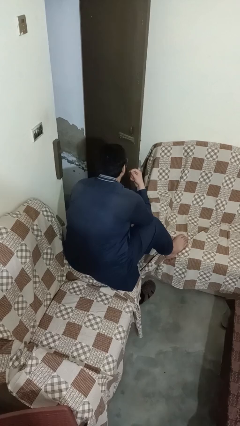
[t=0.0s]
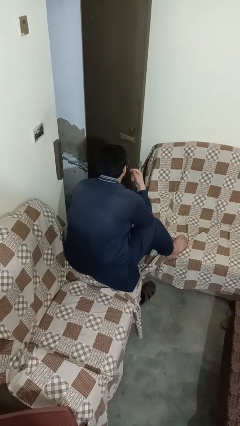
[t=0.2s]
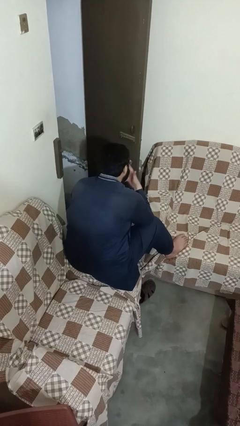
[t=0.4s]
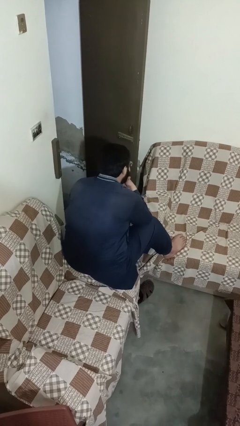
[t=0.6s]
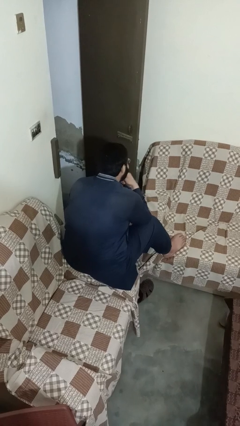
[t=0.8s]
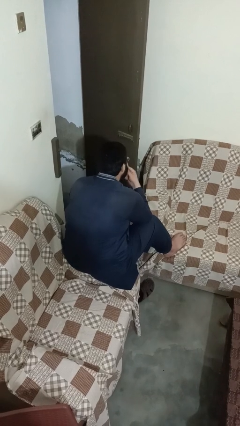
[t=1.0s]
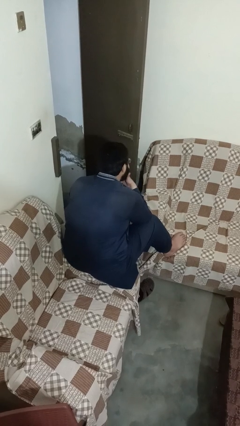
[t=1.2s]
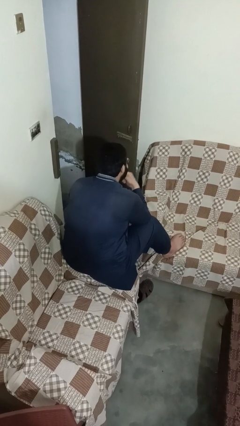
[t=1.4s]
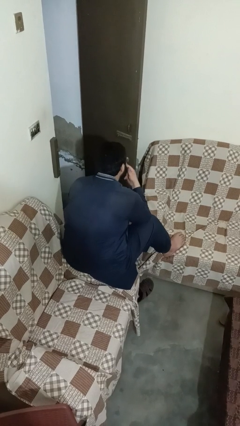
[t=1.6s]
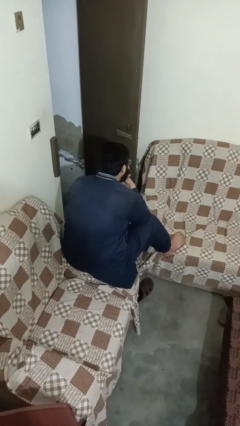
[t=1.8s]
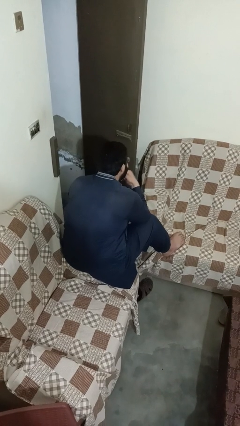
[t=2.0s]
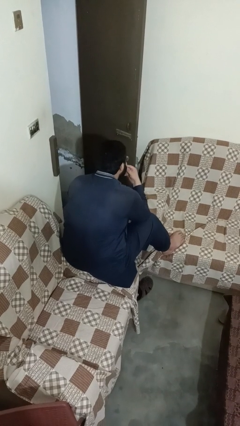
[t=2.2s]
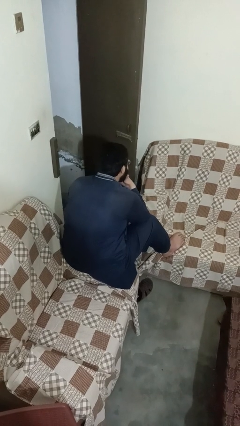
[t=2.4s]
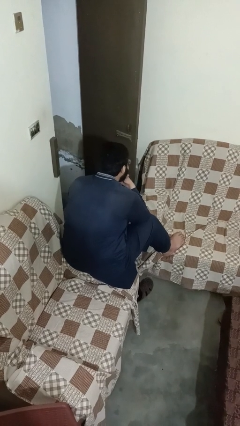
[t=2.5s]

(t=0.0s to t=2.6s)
person strokes chin

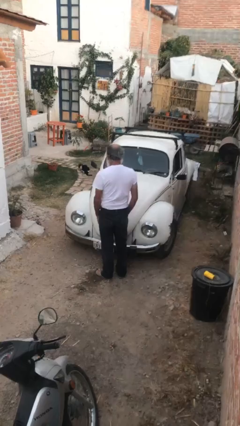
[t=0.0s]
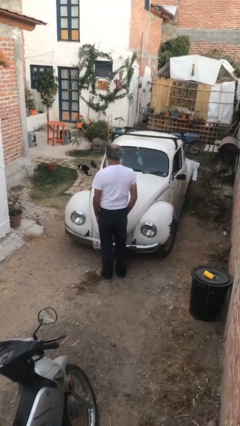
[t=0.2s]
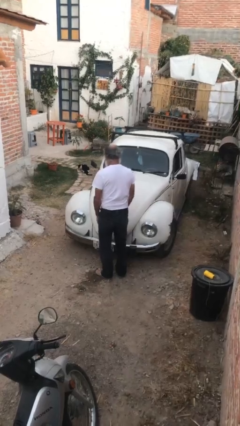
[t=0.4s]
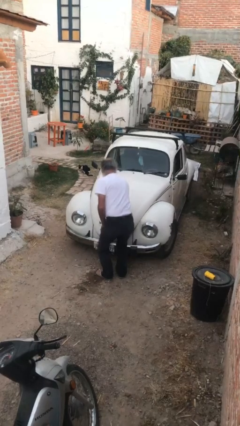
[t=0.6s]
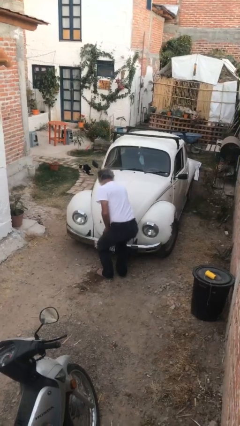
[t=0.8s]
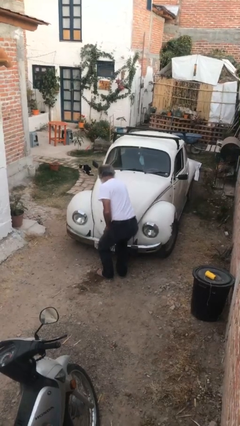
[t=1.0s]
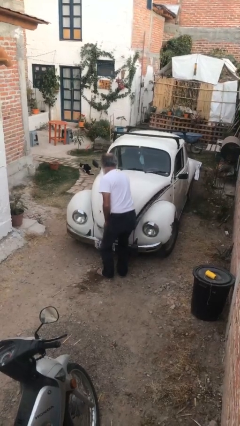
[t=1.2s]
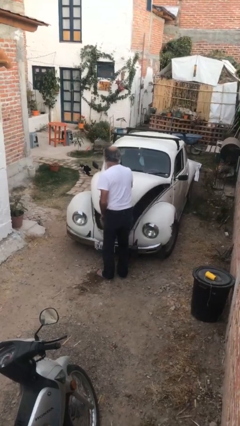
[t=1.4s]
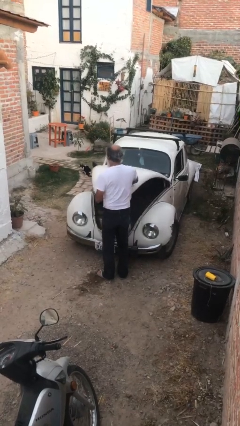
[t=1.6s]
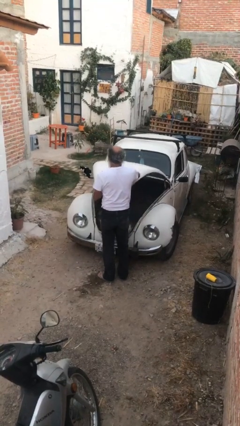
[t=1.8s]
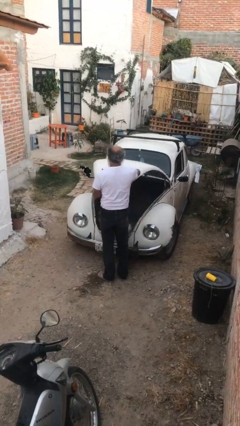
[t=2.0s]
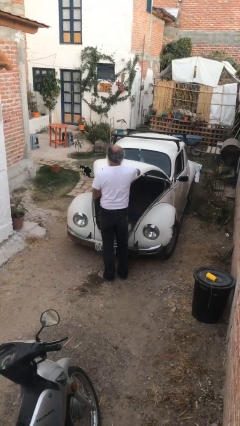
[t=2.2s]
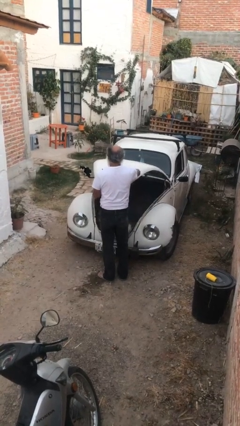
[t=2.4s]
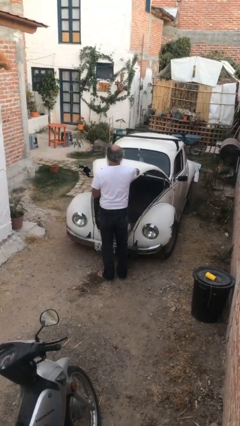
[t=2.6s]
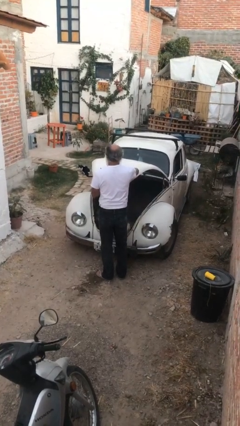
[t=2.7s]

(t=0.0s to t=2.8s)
person opens car trunk

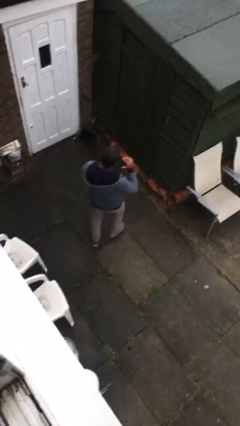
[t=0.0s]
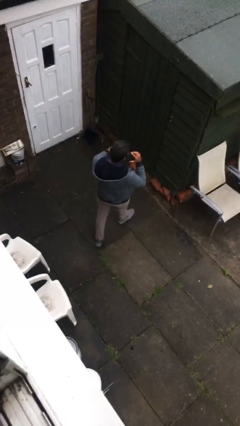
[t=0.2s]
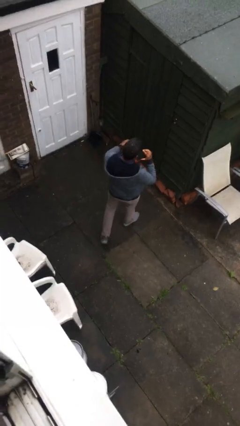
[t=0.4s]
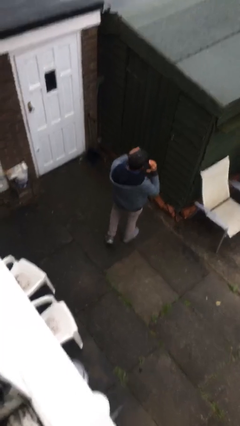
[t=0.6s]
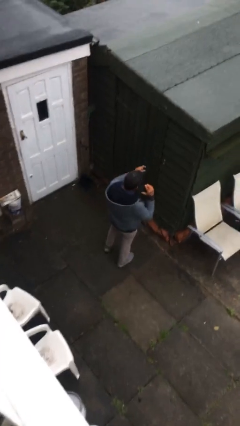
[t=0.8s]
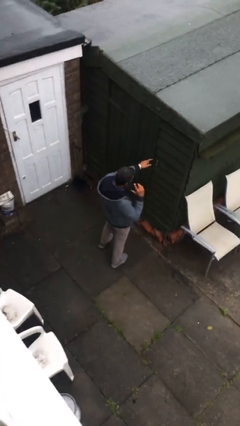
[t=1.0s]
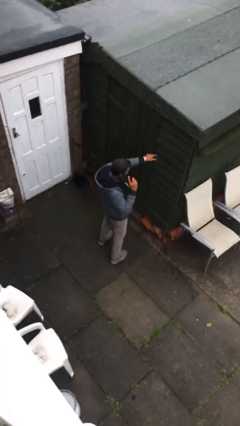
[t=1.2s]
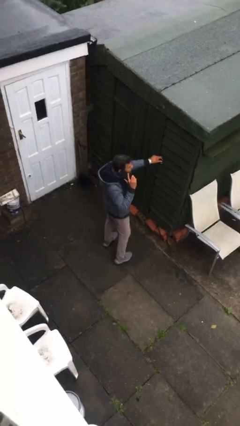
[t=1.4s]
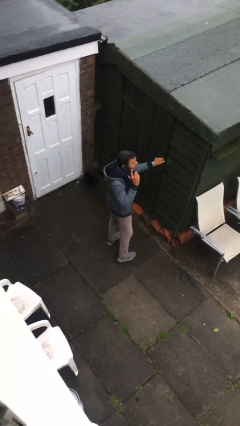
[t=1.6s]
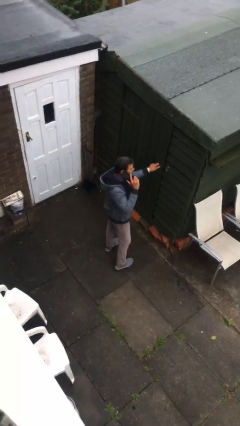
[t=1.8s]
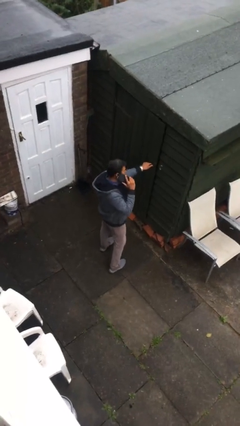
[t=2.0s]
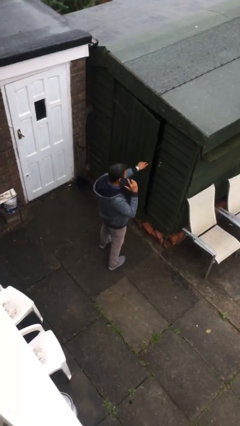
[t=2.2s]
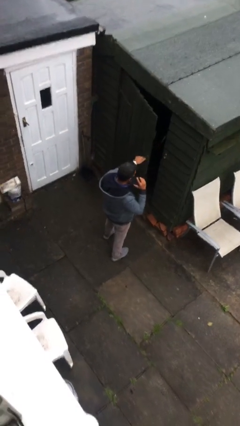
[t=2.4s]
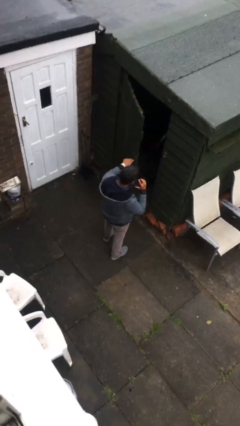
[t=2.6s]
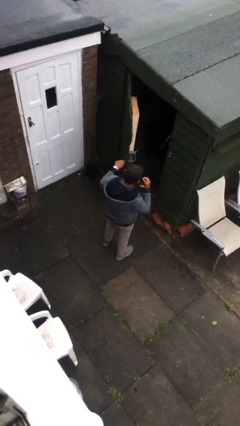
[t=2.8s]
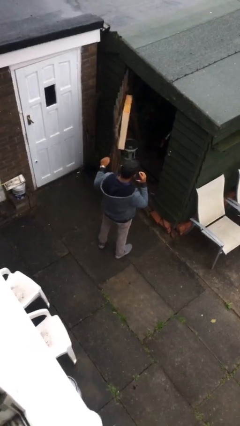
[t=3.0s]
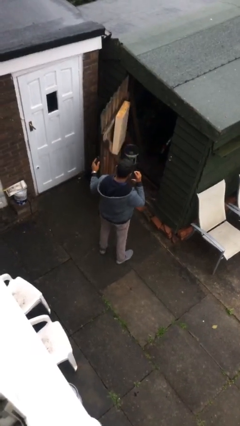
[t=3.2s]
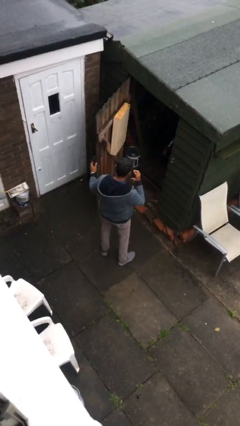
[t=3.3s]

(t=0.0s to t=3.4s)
person opens facility door

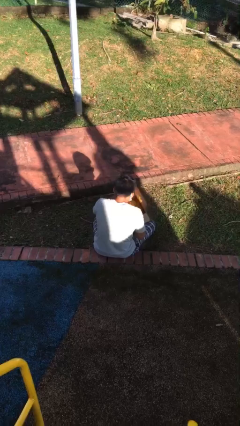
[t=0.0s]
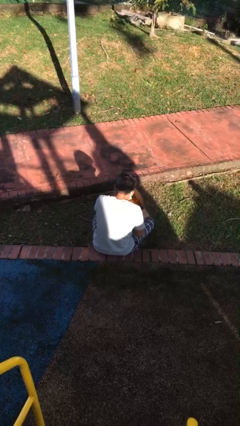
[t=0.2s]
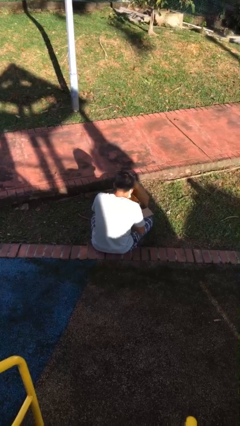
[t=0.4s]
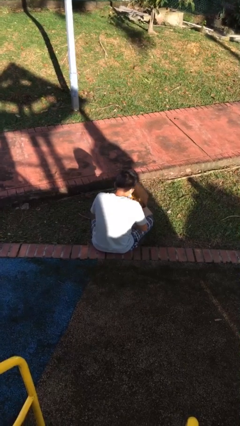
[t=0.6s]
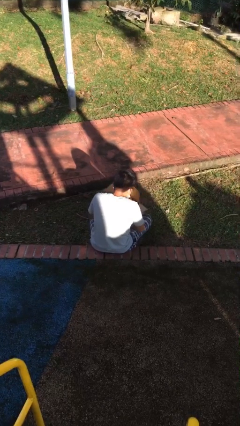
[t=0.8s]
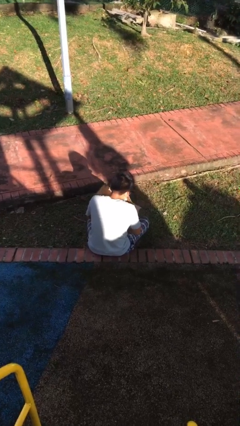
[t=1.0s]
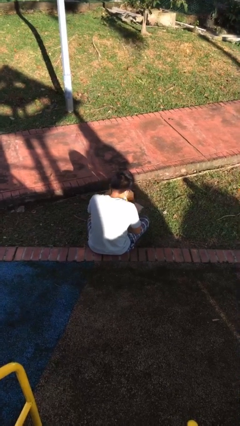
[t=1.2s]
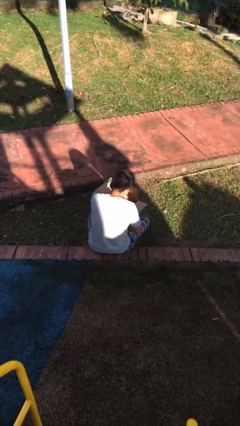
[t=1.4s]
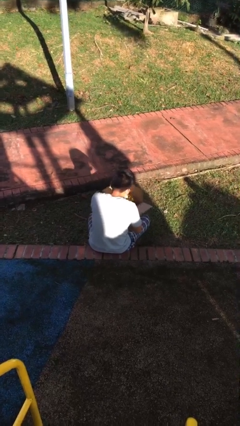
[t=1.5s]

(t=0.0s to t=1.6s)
person searches in box

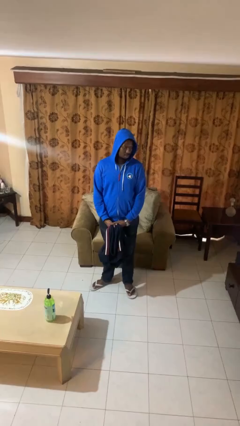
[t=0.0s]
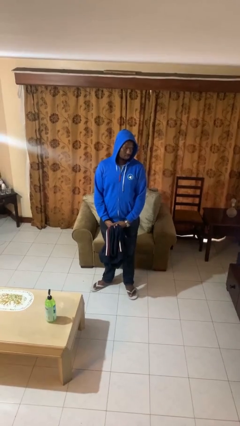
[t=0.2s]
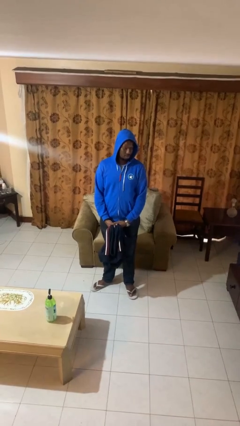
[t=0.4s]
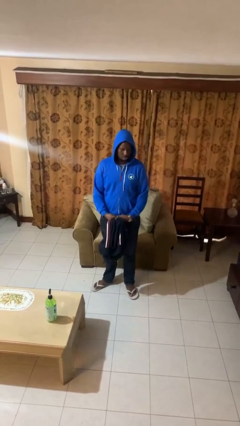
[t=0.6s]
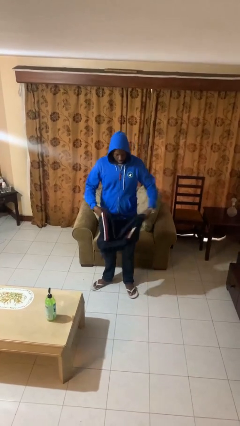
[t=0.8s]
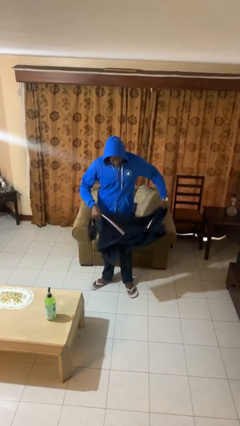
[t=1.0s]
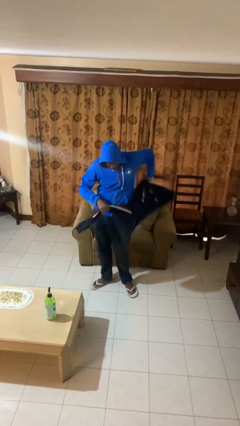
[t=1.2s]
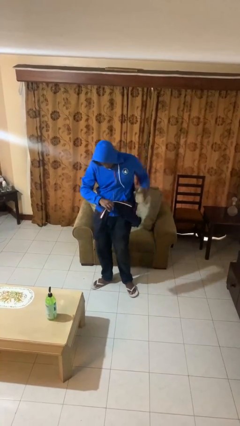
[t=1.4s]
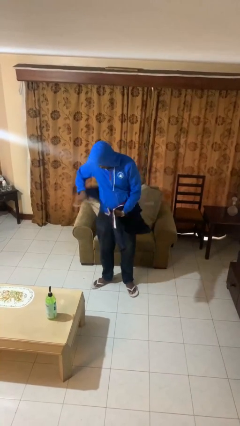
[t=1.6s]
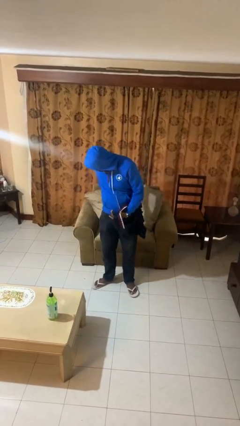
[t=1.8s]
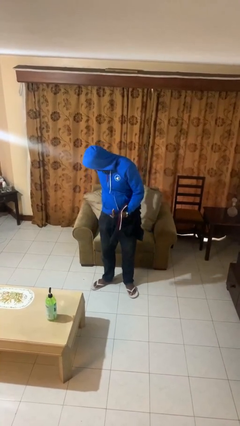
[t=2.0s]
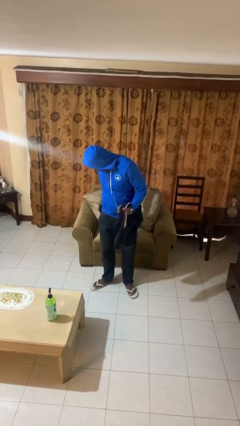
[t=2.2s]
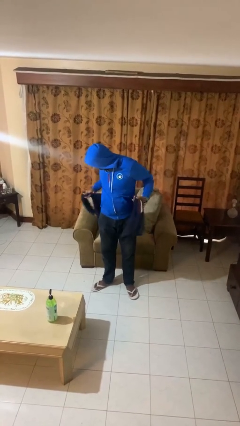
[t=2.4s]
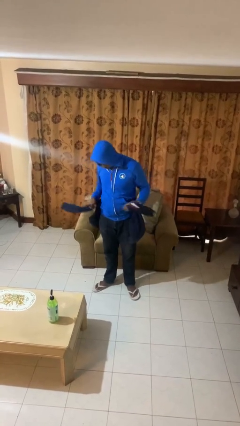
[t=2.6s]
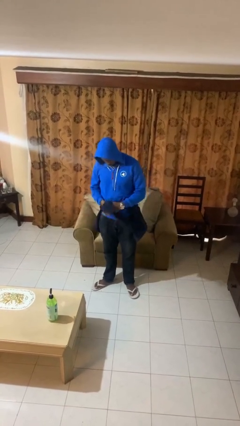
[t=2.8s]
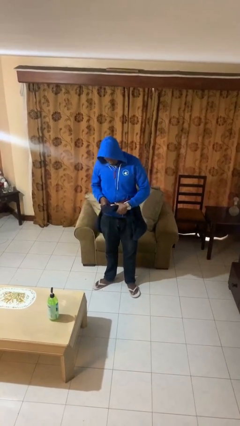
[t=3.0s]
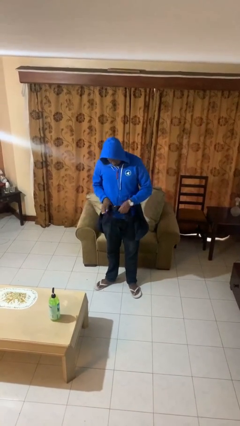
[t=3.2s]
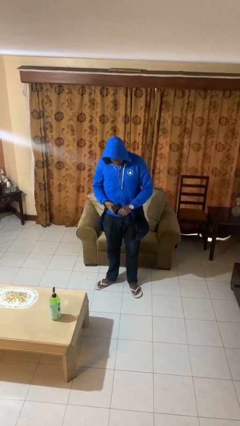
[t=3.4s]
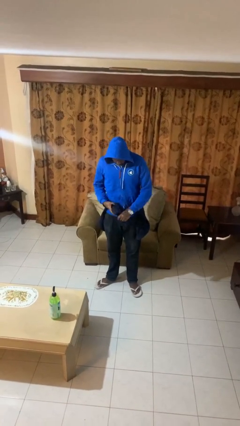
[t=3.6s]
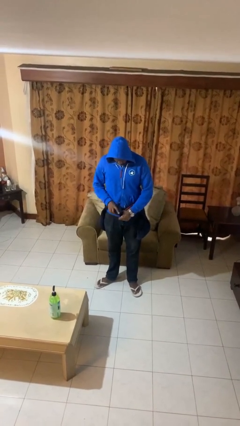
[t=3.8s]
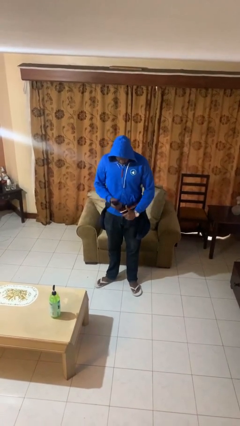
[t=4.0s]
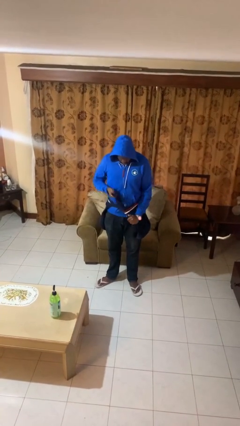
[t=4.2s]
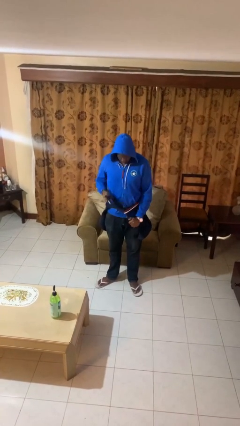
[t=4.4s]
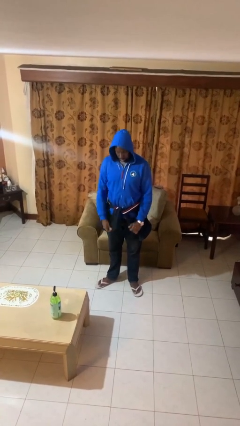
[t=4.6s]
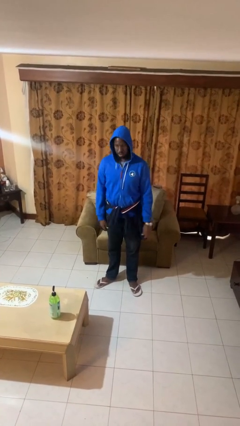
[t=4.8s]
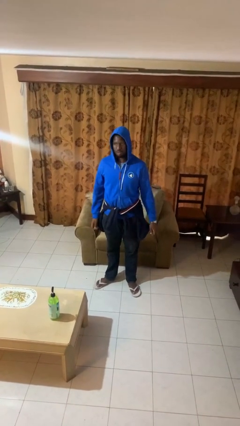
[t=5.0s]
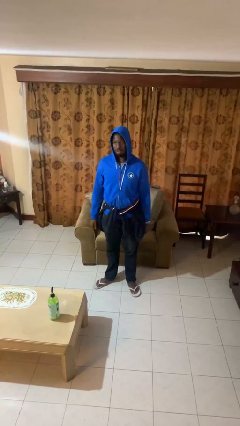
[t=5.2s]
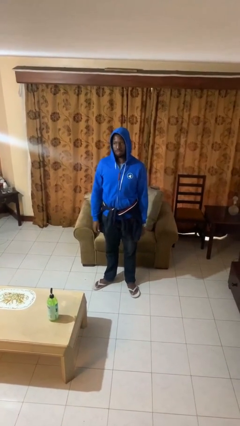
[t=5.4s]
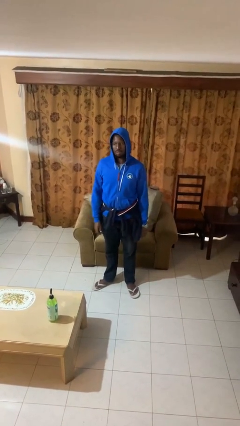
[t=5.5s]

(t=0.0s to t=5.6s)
person ties jacket around waist

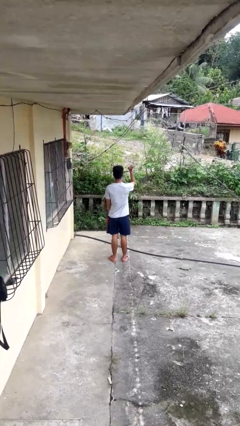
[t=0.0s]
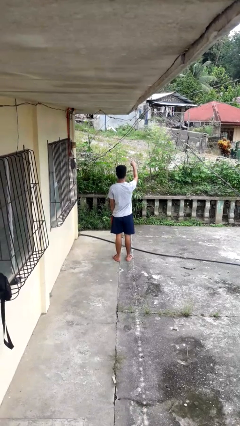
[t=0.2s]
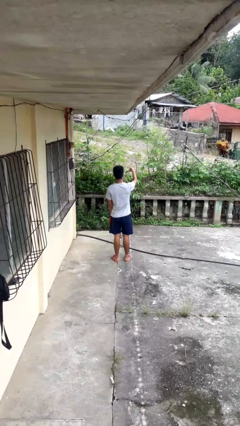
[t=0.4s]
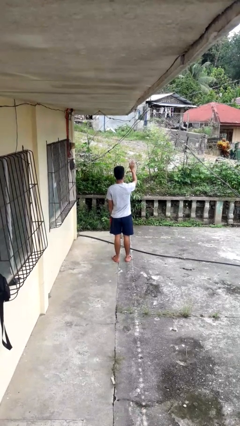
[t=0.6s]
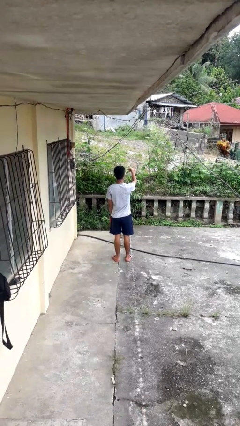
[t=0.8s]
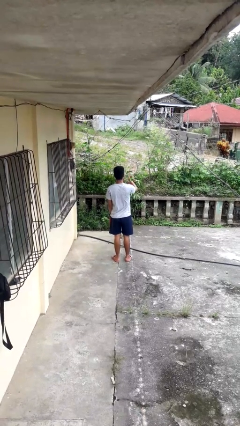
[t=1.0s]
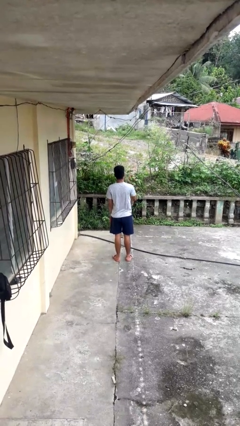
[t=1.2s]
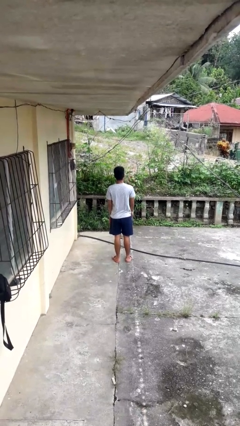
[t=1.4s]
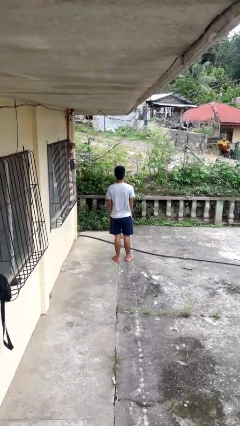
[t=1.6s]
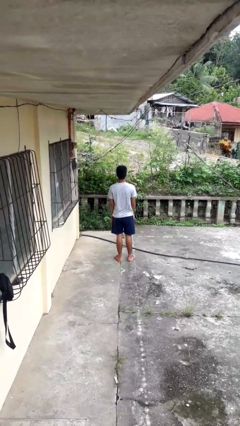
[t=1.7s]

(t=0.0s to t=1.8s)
person gestures come here
